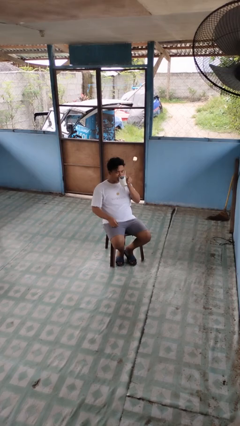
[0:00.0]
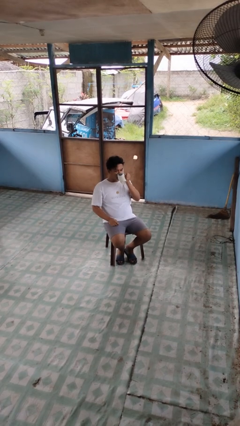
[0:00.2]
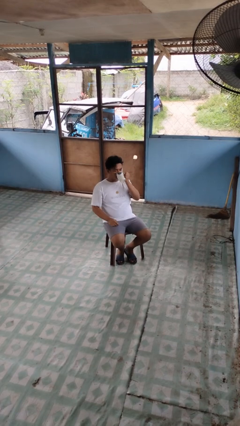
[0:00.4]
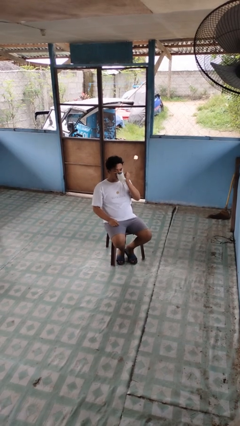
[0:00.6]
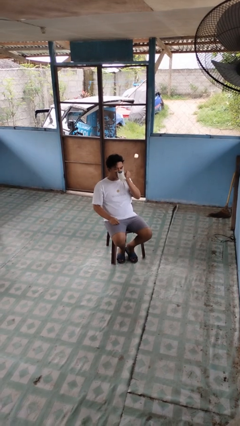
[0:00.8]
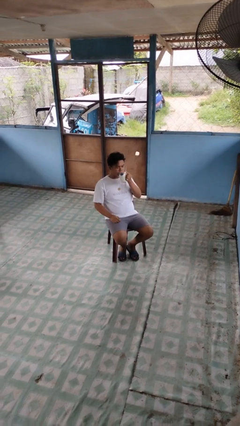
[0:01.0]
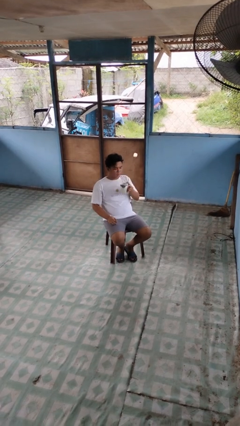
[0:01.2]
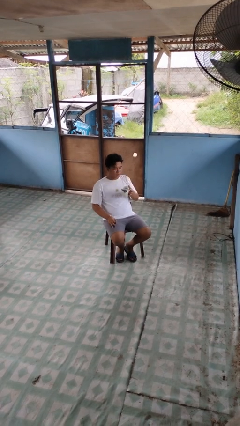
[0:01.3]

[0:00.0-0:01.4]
person drinks from mug

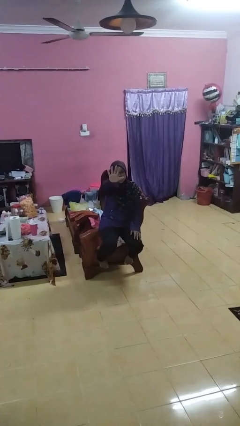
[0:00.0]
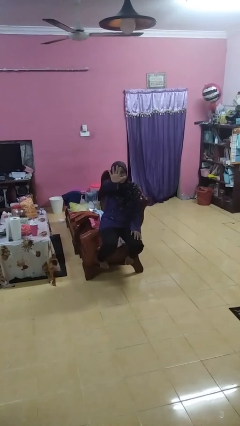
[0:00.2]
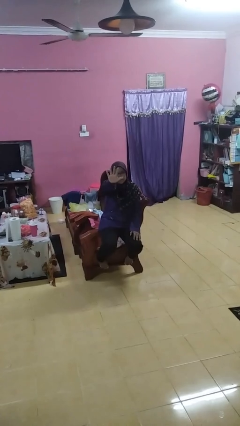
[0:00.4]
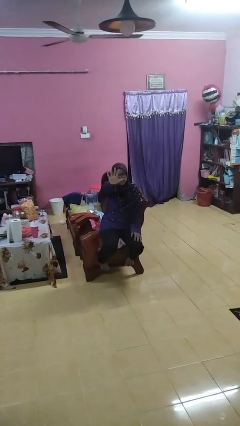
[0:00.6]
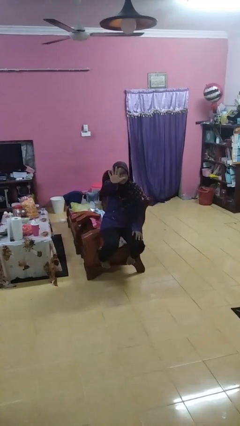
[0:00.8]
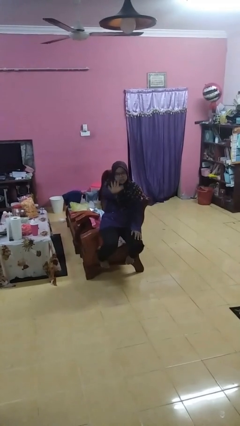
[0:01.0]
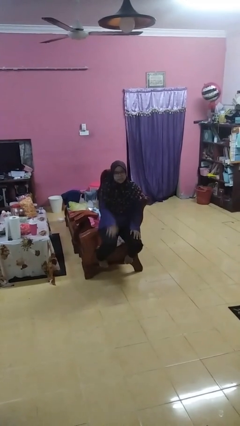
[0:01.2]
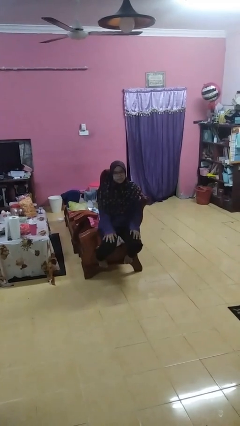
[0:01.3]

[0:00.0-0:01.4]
person gestures number five

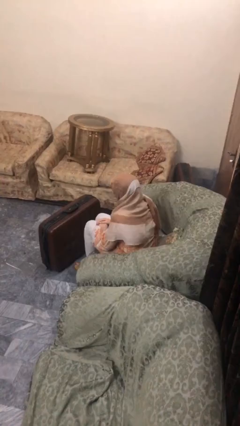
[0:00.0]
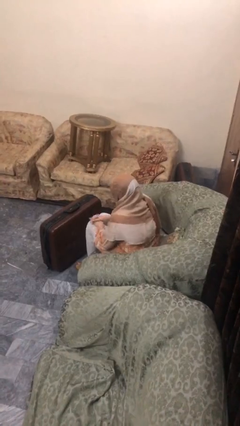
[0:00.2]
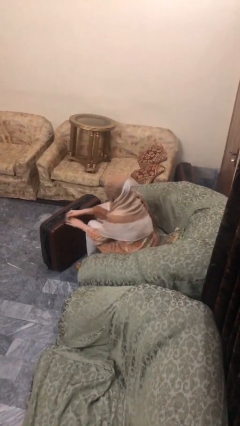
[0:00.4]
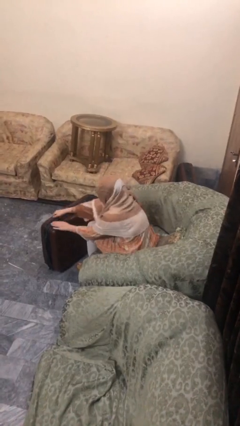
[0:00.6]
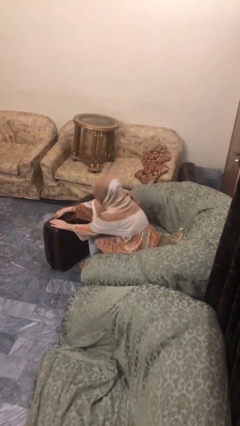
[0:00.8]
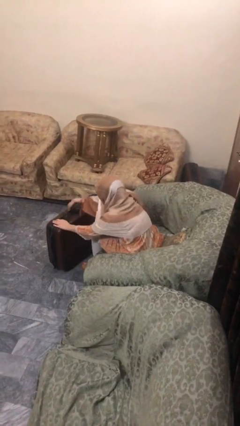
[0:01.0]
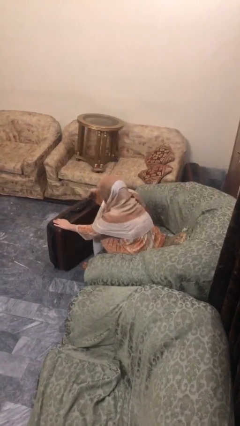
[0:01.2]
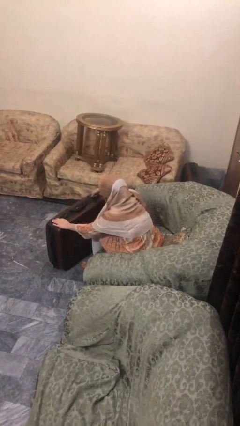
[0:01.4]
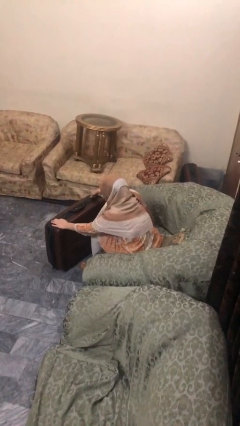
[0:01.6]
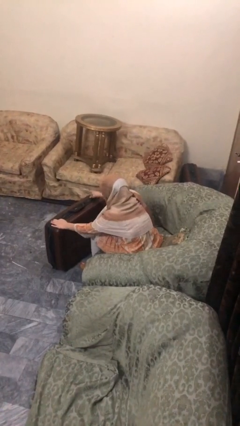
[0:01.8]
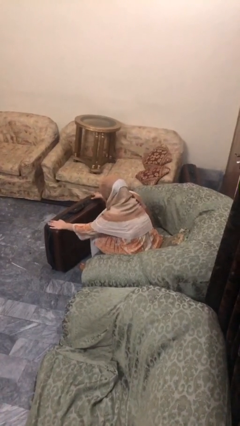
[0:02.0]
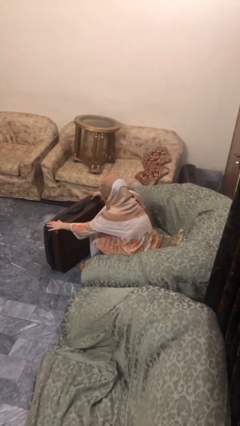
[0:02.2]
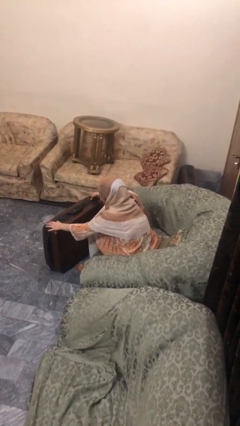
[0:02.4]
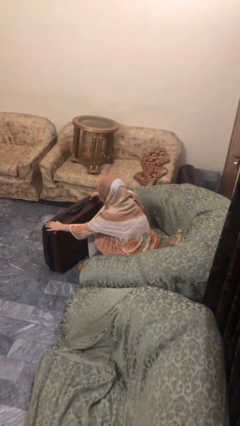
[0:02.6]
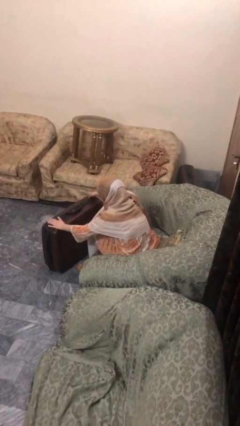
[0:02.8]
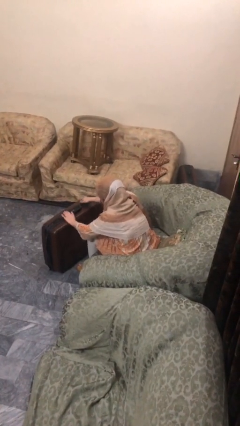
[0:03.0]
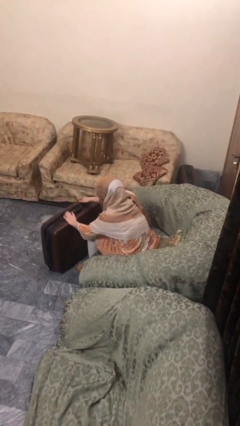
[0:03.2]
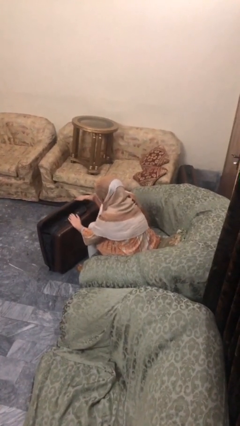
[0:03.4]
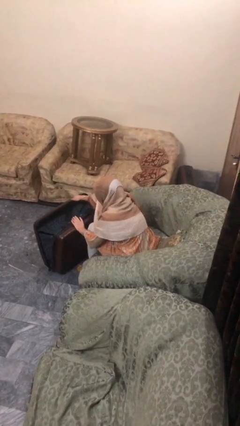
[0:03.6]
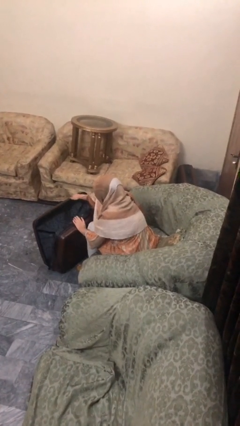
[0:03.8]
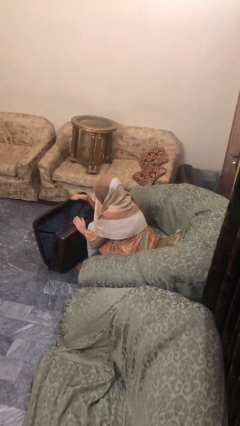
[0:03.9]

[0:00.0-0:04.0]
person opens suitcase

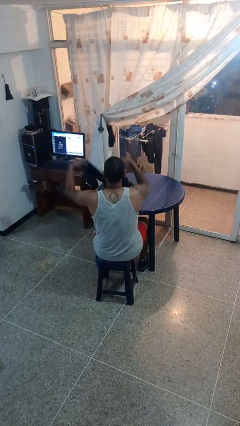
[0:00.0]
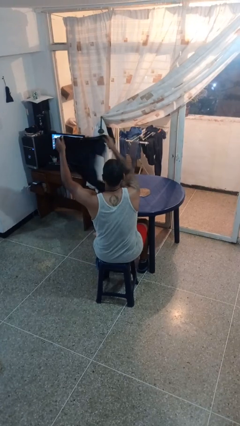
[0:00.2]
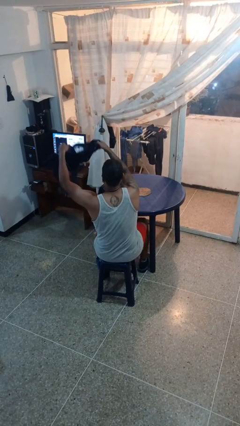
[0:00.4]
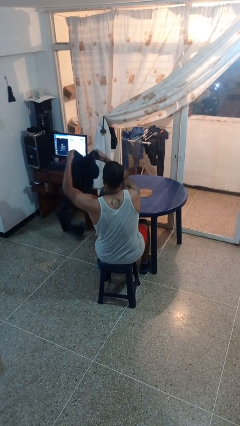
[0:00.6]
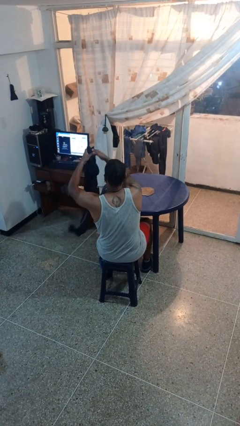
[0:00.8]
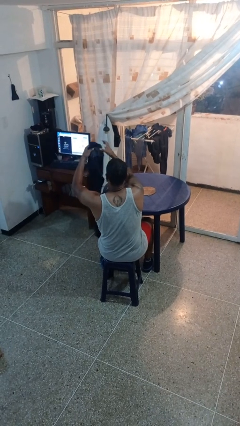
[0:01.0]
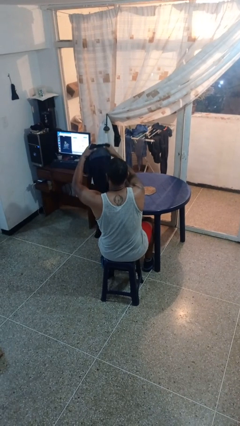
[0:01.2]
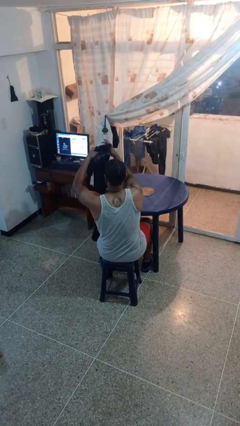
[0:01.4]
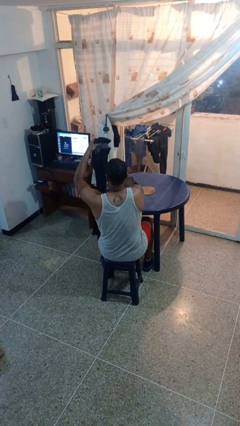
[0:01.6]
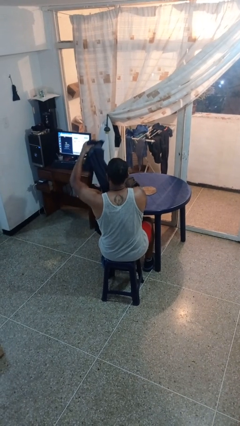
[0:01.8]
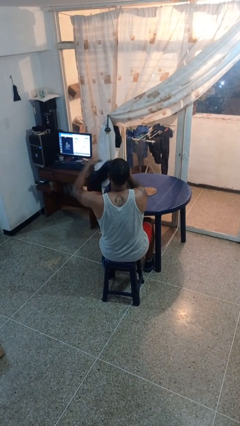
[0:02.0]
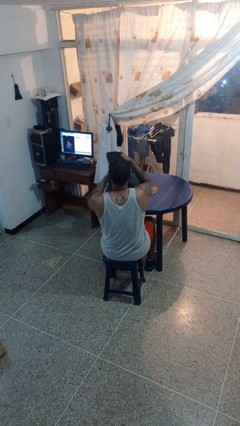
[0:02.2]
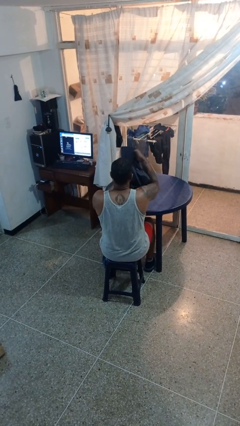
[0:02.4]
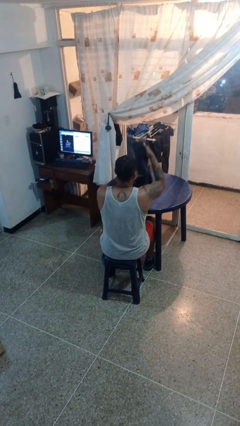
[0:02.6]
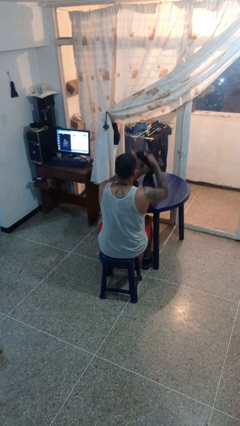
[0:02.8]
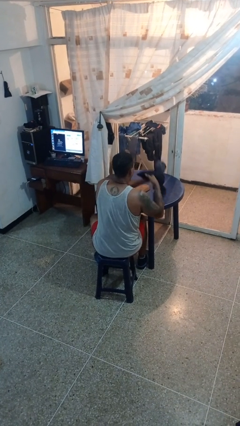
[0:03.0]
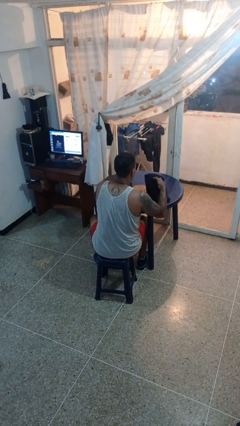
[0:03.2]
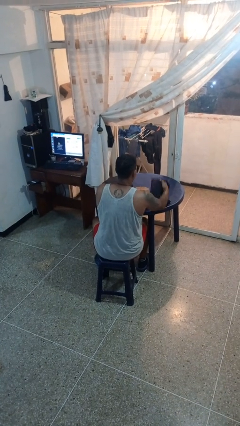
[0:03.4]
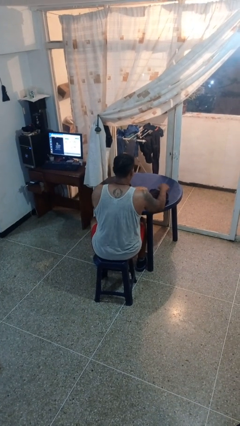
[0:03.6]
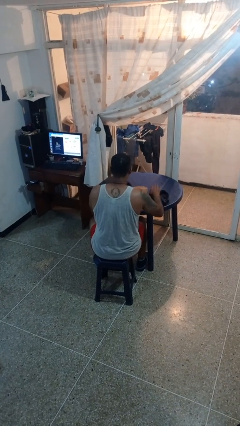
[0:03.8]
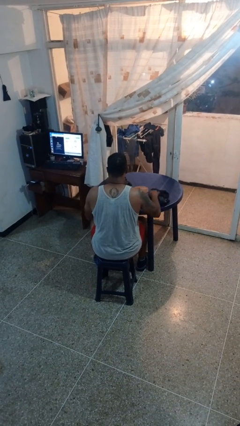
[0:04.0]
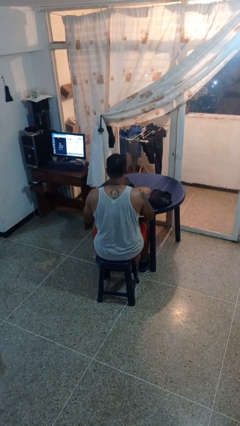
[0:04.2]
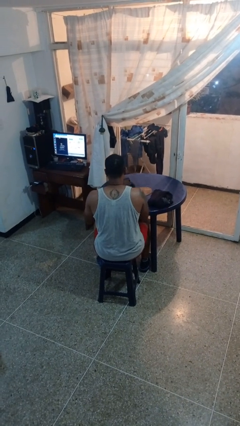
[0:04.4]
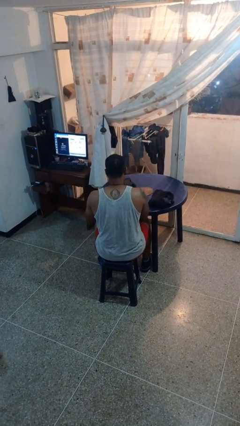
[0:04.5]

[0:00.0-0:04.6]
person folds pants

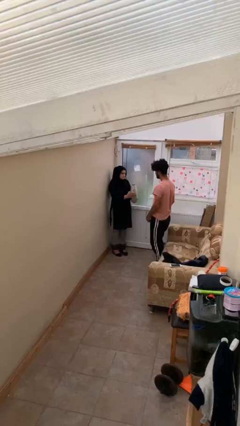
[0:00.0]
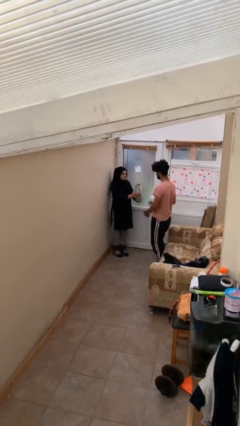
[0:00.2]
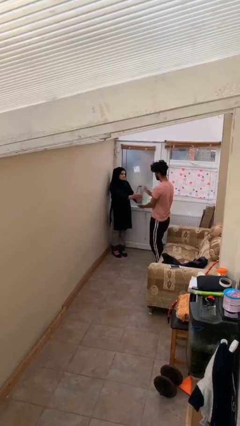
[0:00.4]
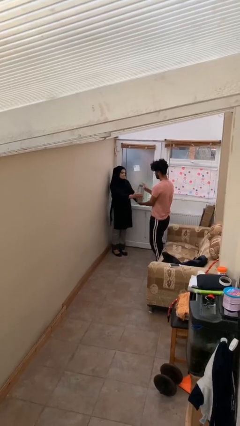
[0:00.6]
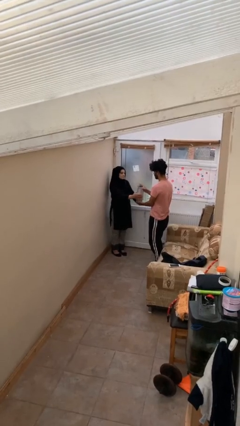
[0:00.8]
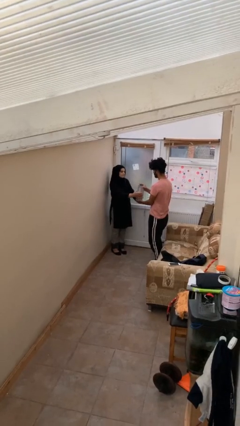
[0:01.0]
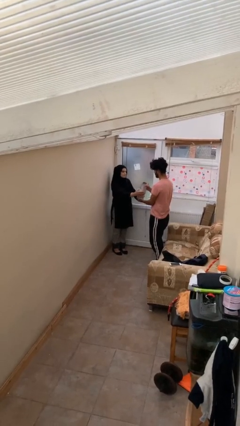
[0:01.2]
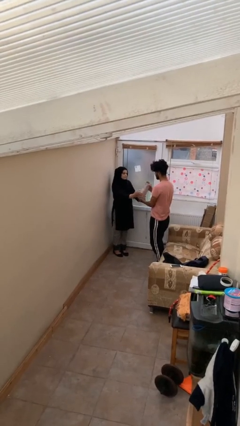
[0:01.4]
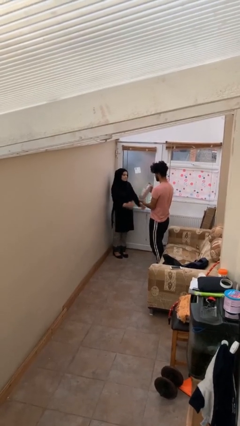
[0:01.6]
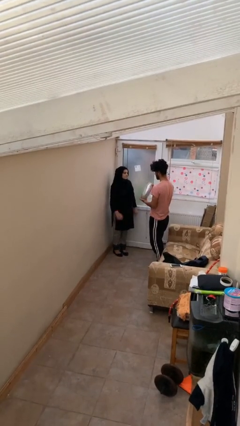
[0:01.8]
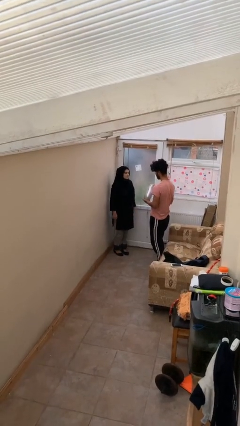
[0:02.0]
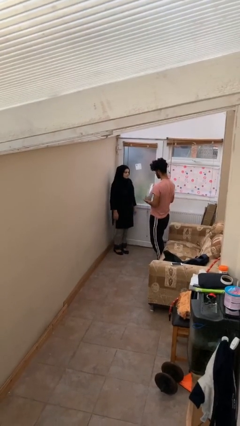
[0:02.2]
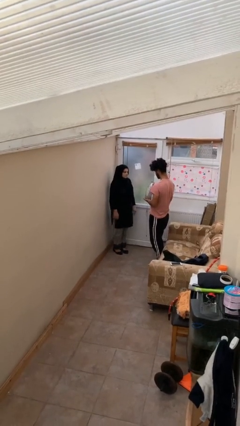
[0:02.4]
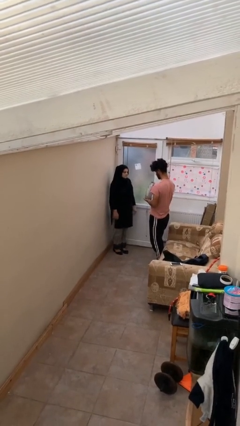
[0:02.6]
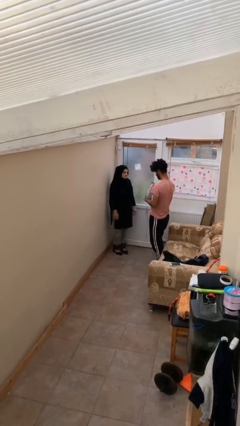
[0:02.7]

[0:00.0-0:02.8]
person transfers object to person

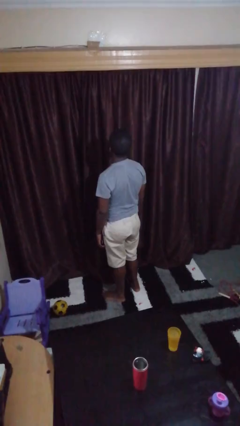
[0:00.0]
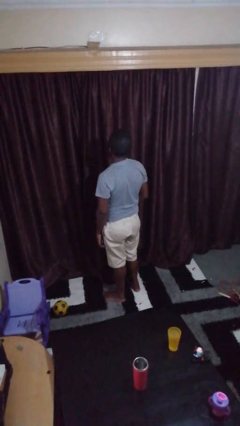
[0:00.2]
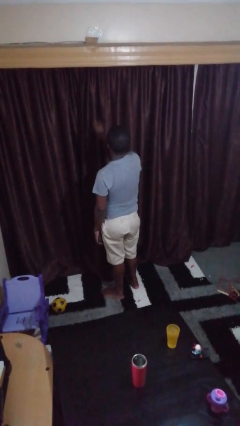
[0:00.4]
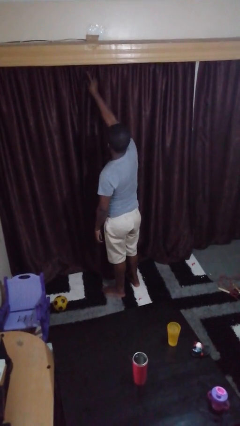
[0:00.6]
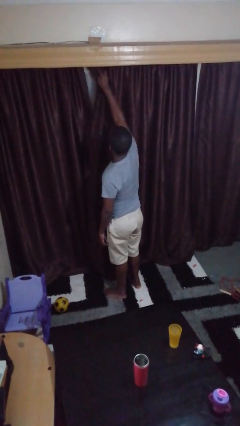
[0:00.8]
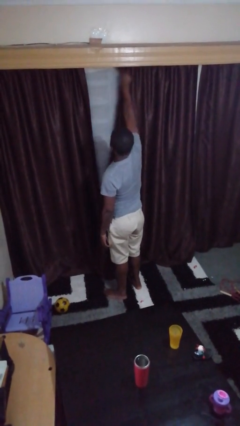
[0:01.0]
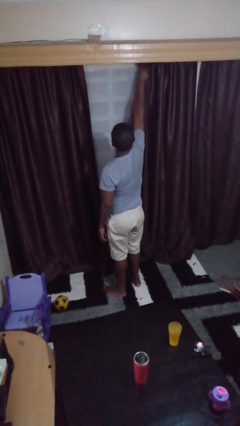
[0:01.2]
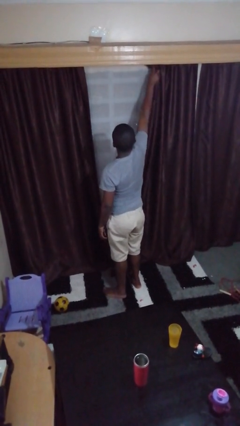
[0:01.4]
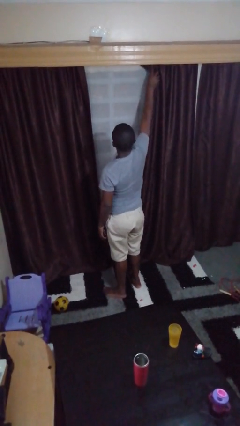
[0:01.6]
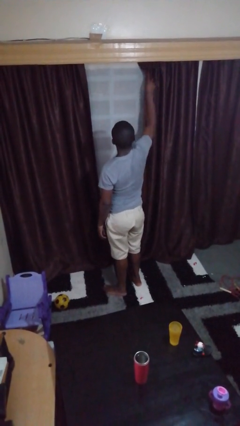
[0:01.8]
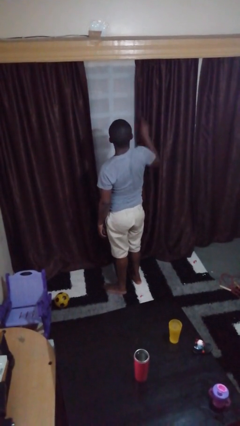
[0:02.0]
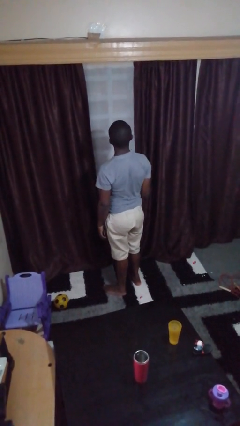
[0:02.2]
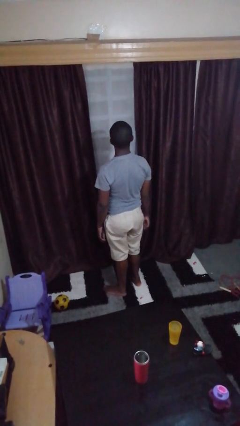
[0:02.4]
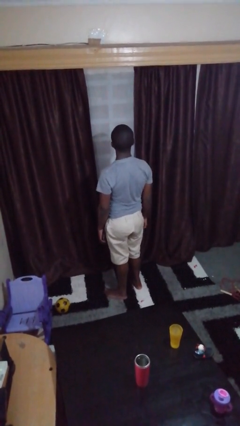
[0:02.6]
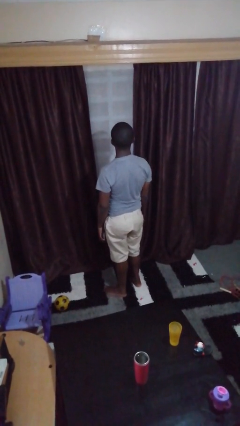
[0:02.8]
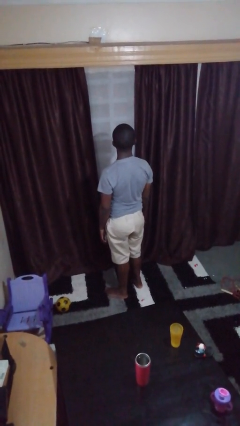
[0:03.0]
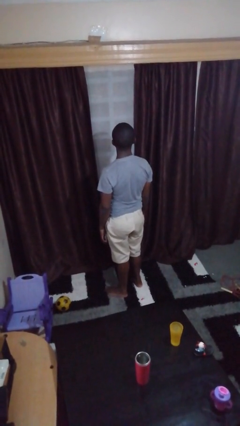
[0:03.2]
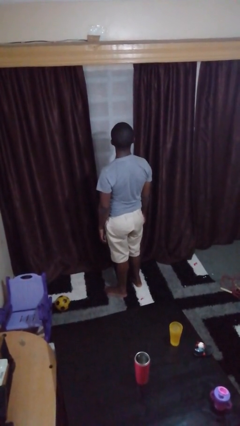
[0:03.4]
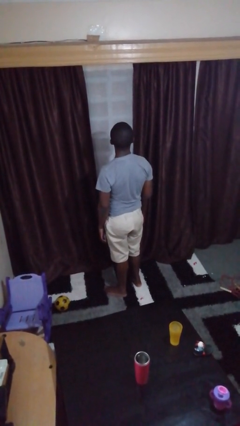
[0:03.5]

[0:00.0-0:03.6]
person opens curtains
